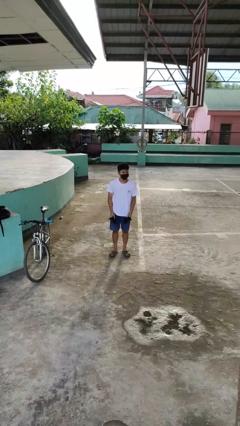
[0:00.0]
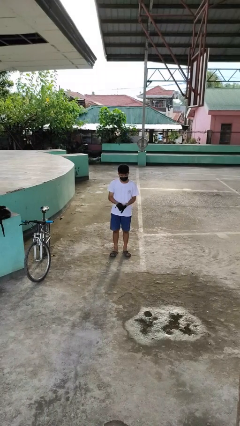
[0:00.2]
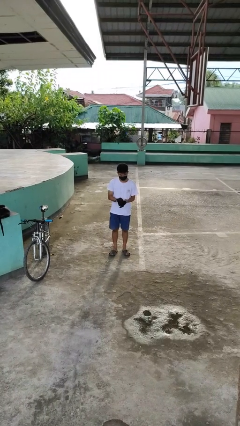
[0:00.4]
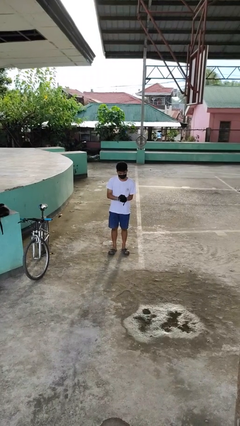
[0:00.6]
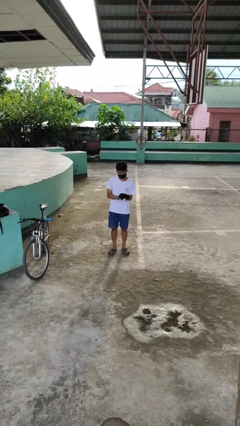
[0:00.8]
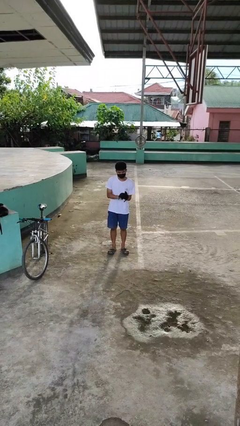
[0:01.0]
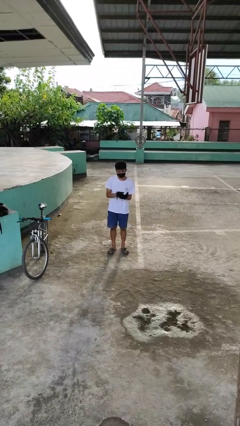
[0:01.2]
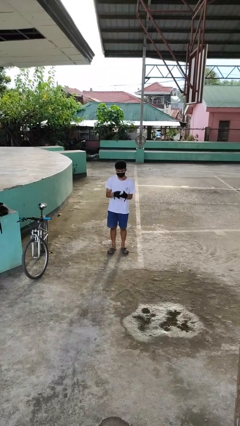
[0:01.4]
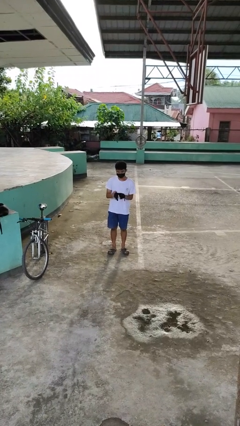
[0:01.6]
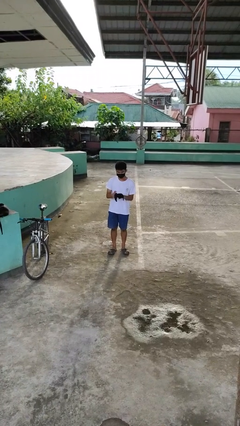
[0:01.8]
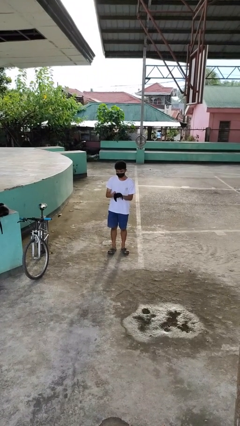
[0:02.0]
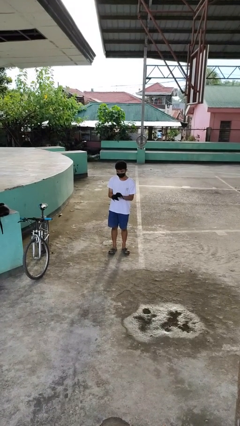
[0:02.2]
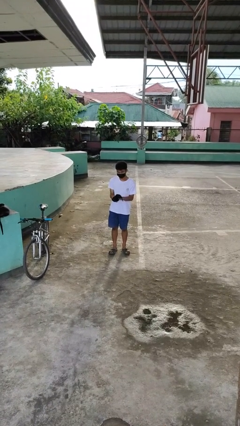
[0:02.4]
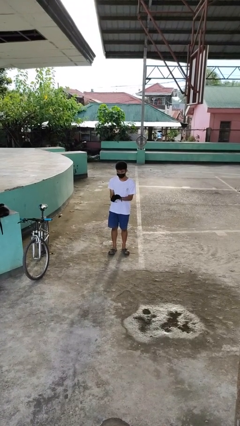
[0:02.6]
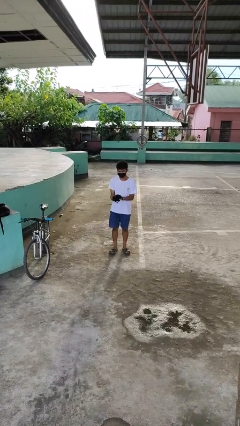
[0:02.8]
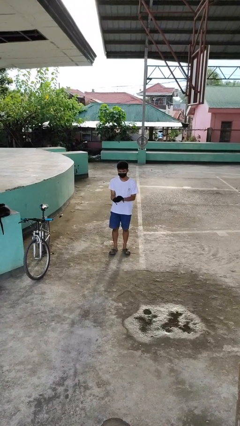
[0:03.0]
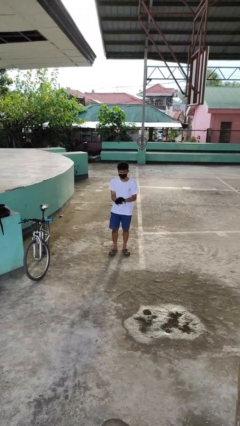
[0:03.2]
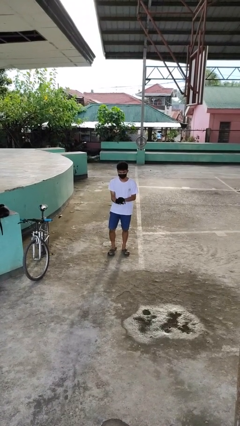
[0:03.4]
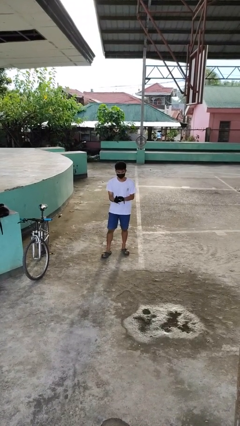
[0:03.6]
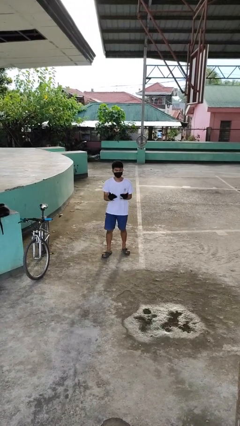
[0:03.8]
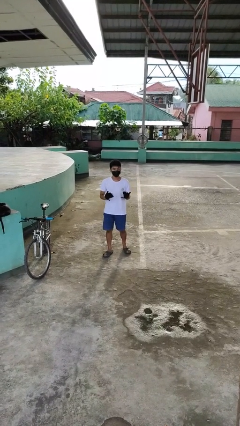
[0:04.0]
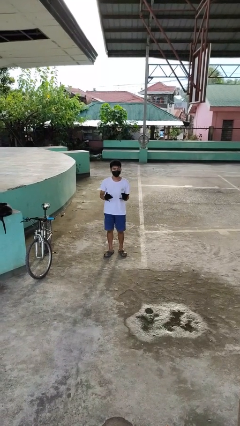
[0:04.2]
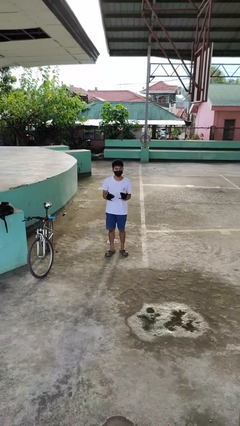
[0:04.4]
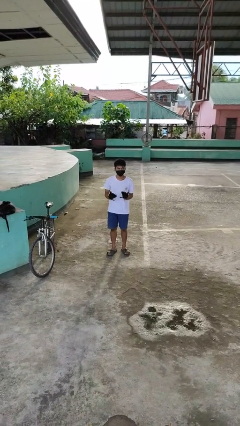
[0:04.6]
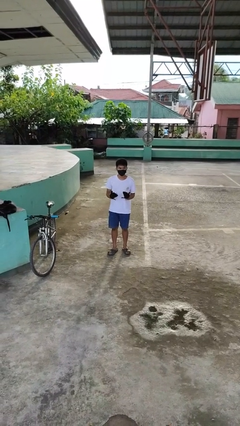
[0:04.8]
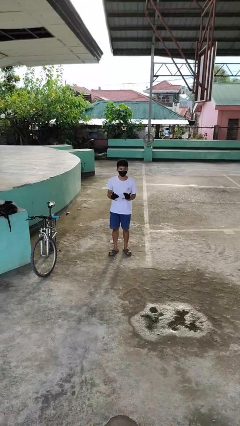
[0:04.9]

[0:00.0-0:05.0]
person puts on gloves

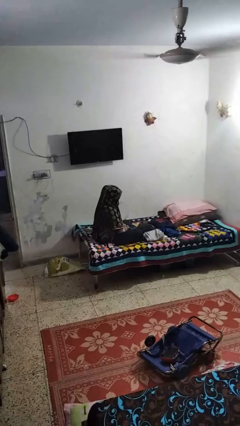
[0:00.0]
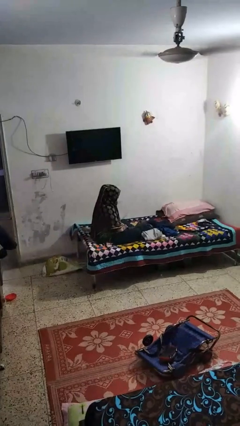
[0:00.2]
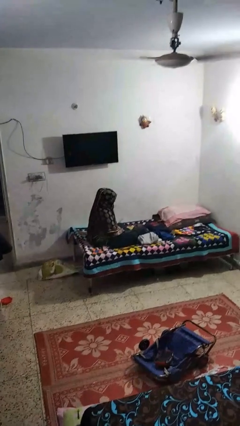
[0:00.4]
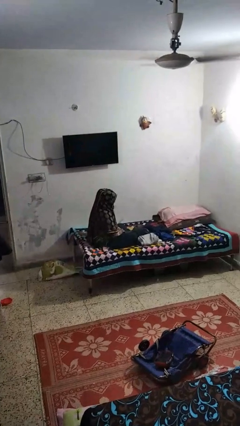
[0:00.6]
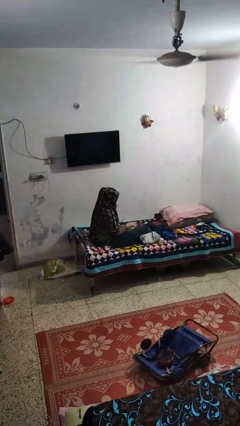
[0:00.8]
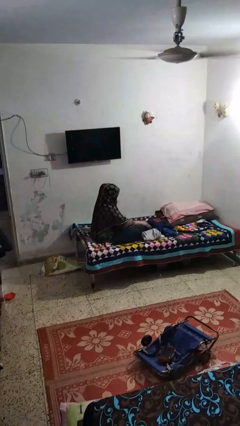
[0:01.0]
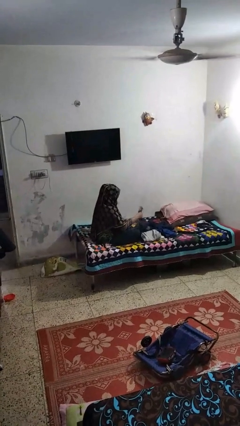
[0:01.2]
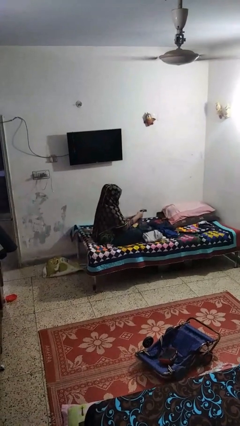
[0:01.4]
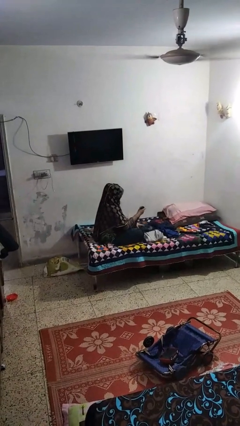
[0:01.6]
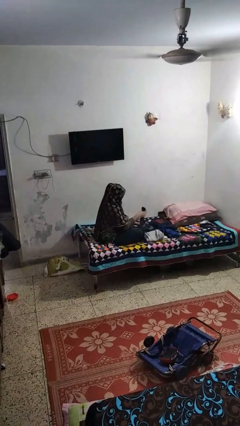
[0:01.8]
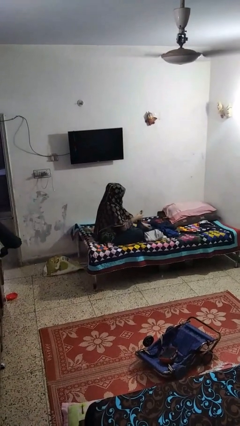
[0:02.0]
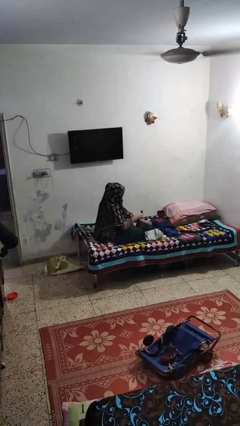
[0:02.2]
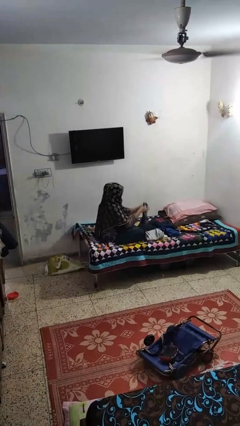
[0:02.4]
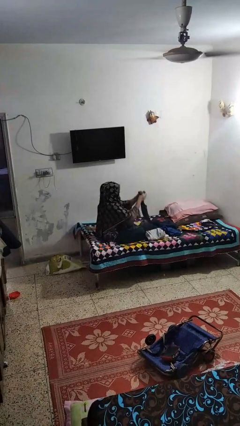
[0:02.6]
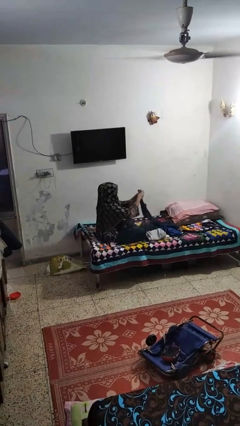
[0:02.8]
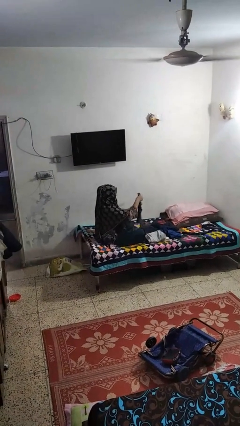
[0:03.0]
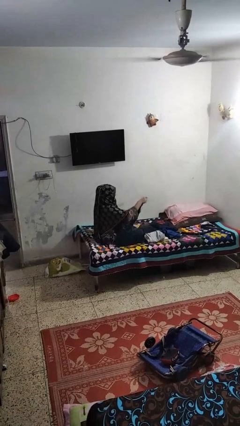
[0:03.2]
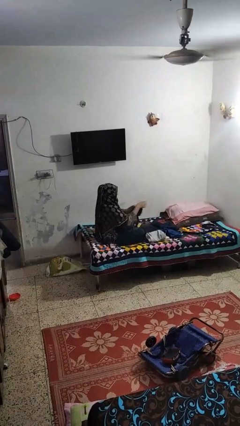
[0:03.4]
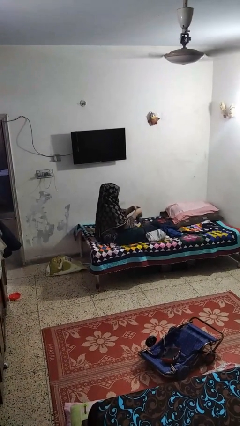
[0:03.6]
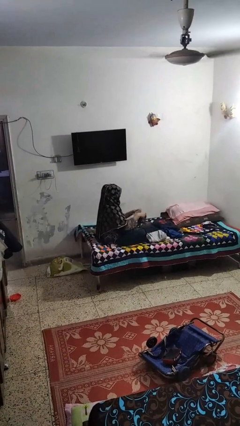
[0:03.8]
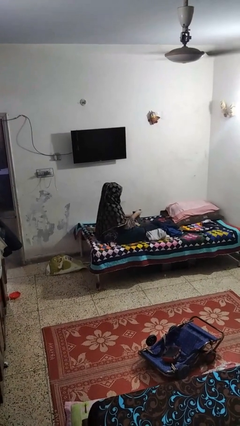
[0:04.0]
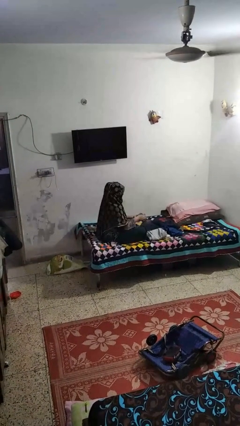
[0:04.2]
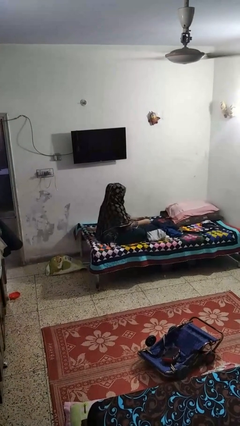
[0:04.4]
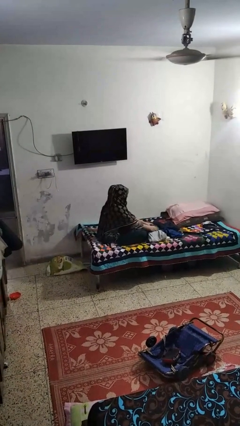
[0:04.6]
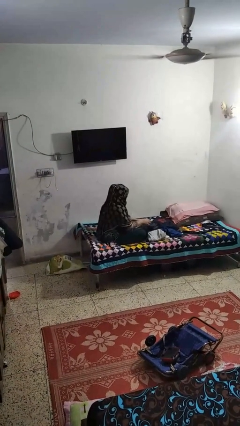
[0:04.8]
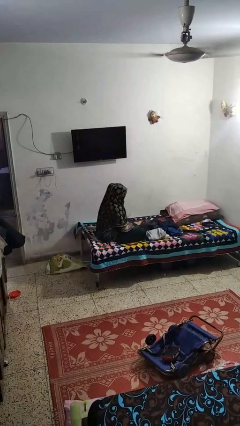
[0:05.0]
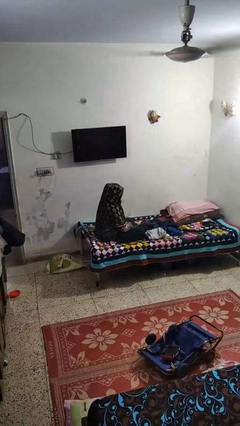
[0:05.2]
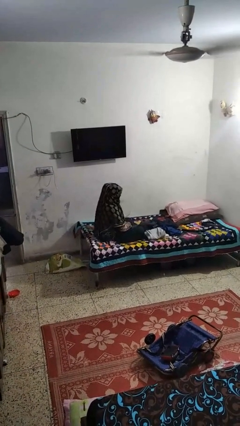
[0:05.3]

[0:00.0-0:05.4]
person folds socks

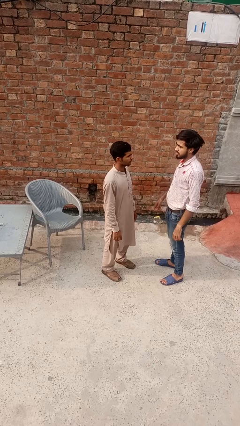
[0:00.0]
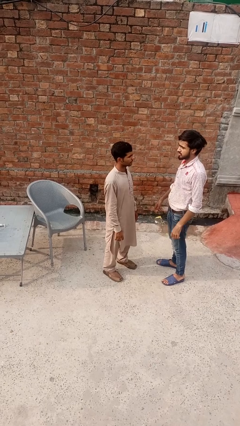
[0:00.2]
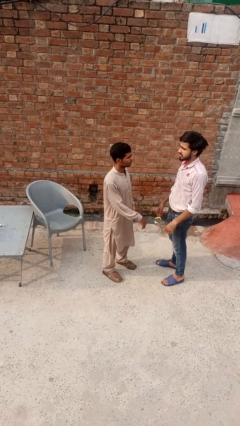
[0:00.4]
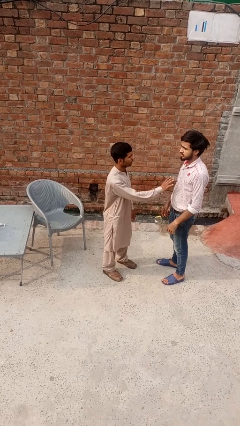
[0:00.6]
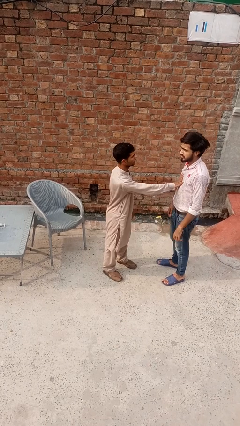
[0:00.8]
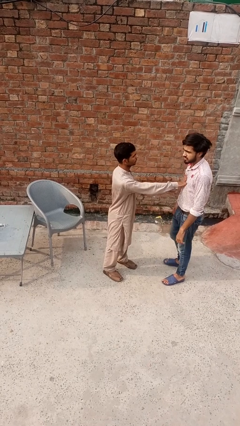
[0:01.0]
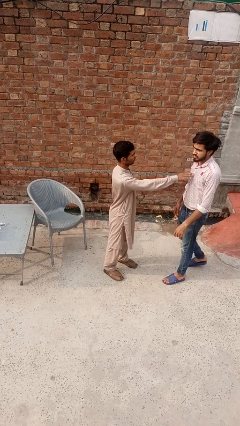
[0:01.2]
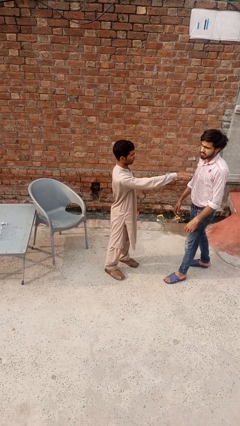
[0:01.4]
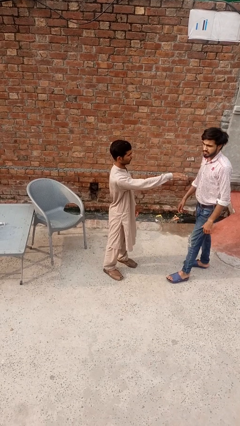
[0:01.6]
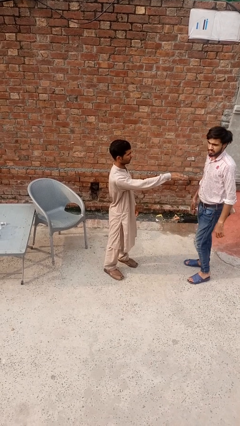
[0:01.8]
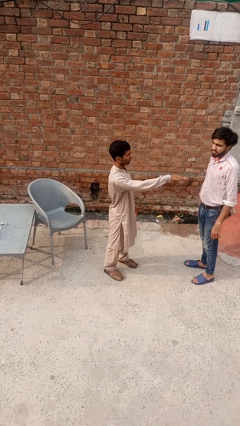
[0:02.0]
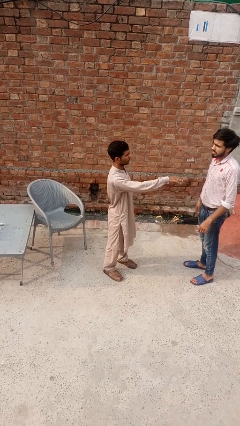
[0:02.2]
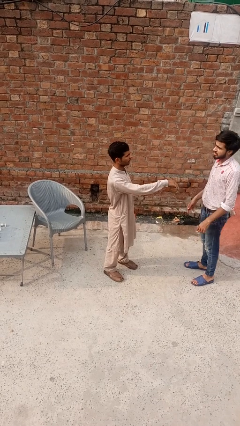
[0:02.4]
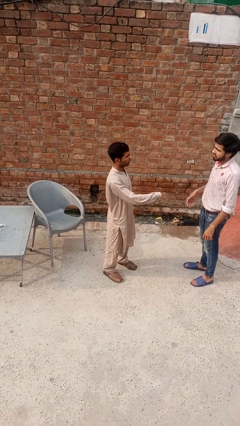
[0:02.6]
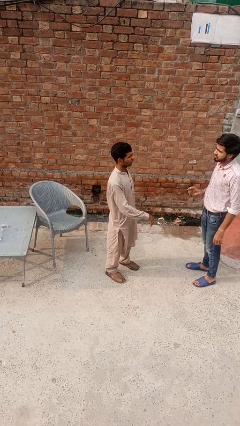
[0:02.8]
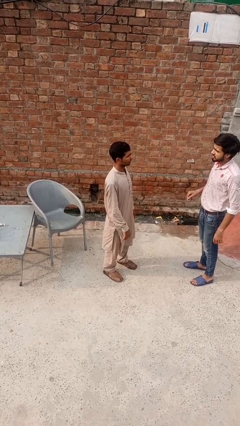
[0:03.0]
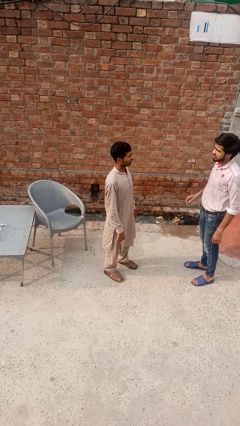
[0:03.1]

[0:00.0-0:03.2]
person grabs person by forearm

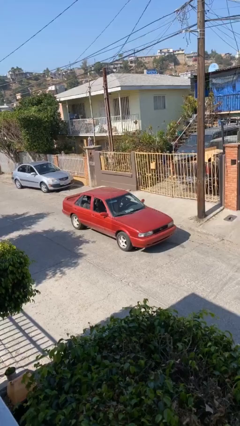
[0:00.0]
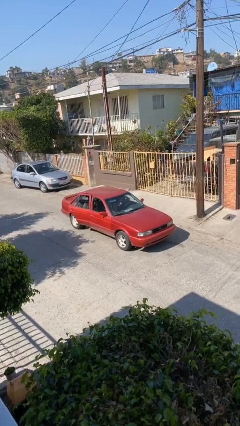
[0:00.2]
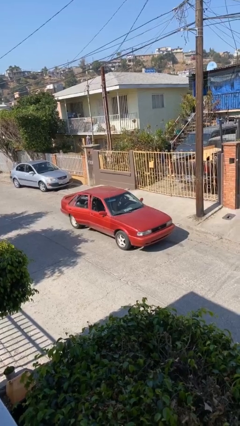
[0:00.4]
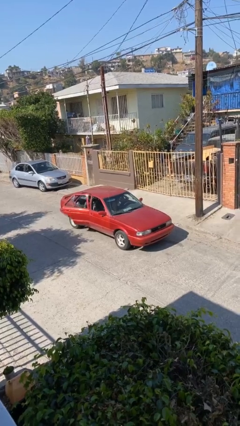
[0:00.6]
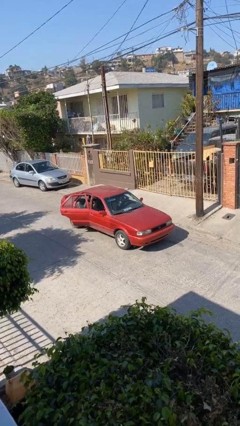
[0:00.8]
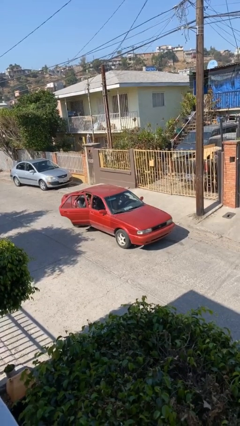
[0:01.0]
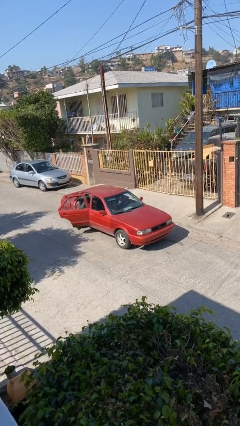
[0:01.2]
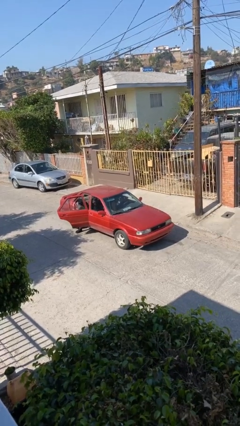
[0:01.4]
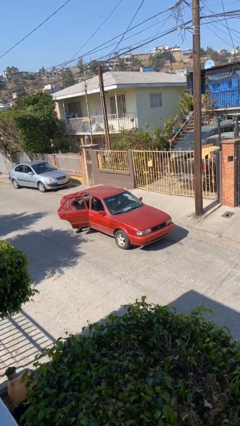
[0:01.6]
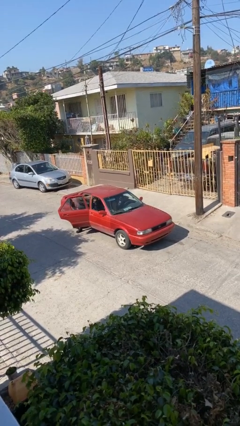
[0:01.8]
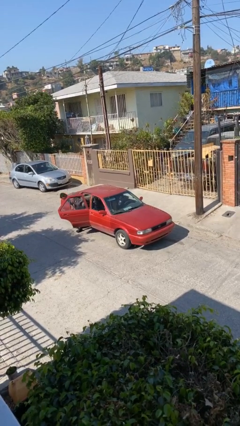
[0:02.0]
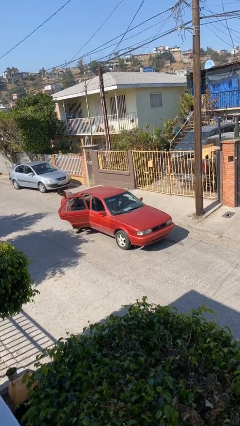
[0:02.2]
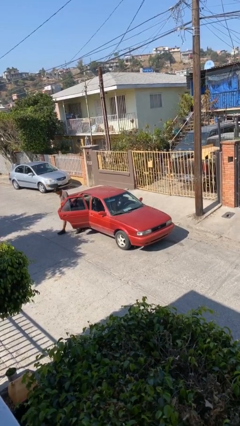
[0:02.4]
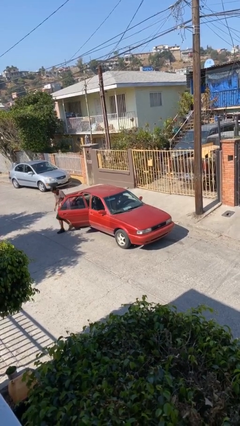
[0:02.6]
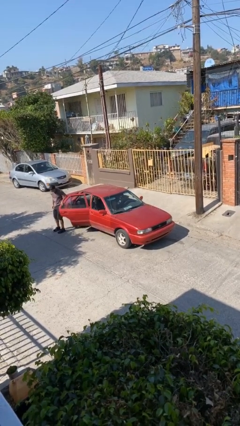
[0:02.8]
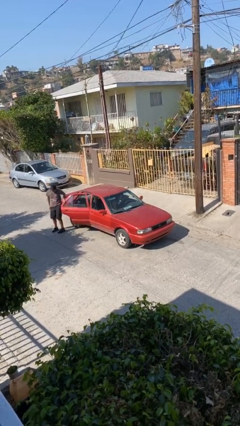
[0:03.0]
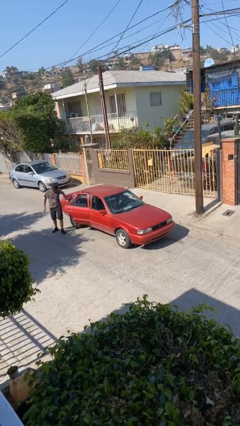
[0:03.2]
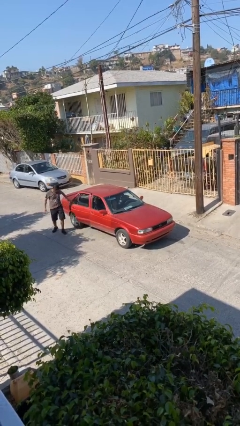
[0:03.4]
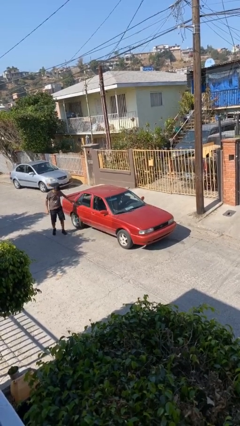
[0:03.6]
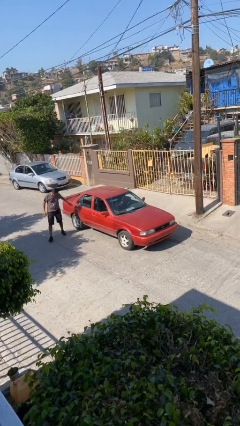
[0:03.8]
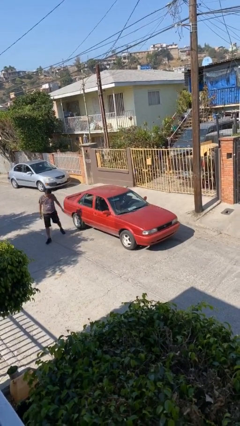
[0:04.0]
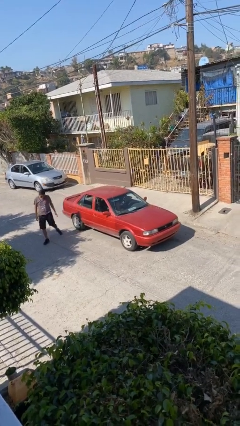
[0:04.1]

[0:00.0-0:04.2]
car drops off person

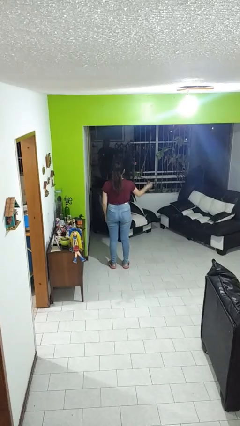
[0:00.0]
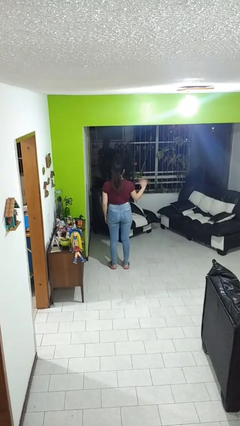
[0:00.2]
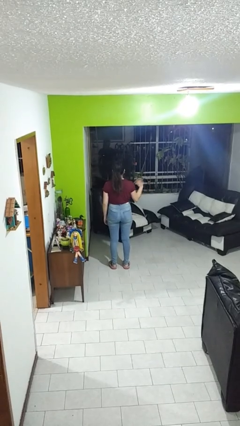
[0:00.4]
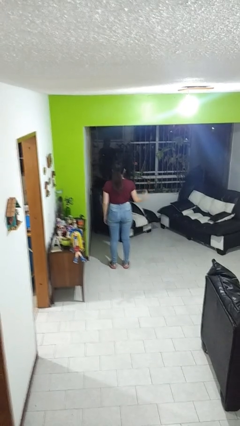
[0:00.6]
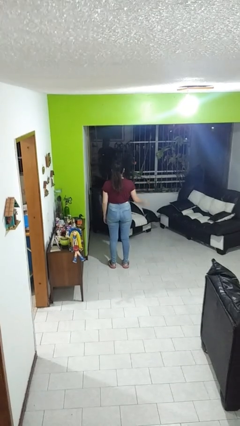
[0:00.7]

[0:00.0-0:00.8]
person gestures come here
